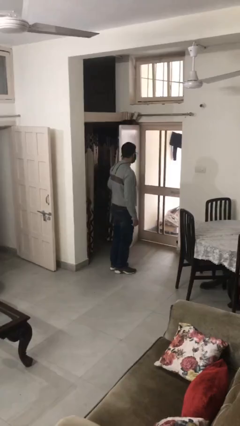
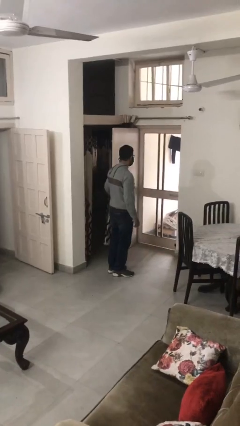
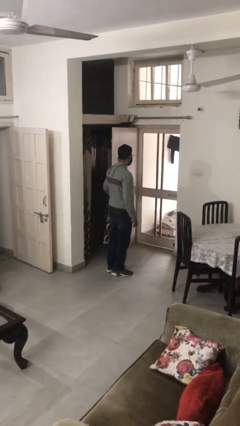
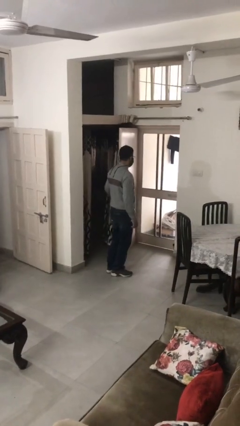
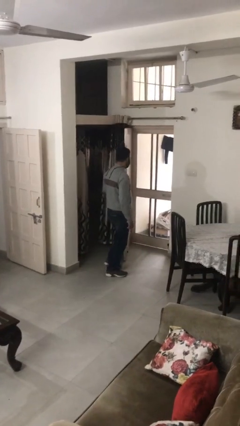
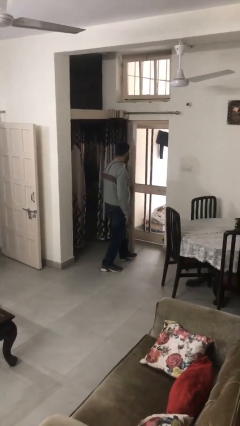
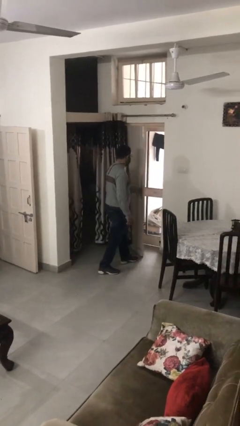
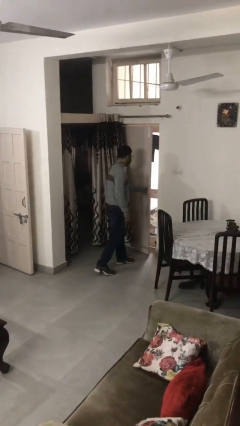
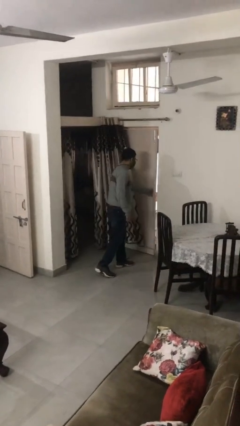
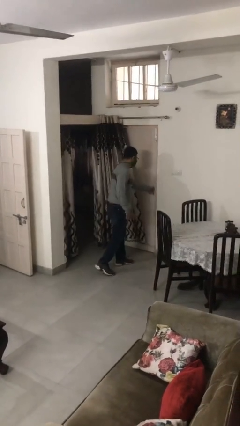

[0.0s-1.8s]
person closes facility door

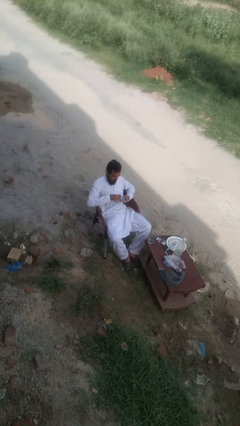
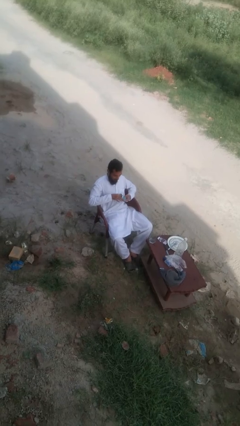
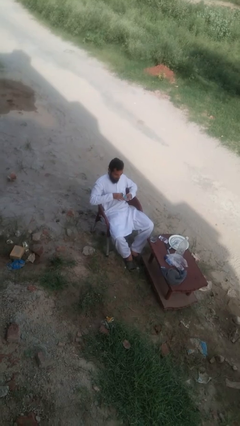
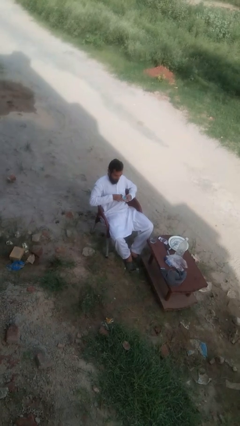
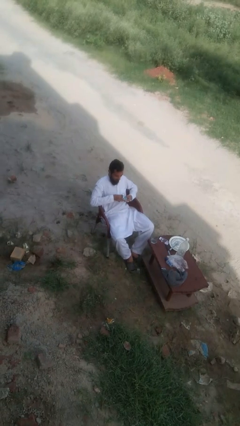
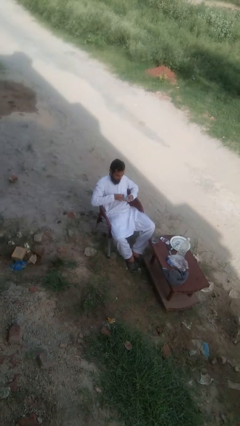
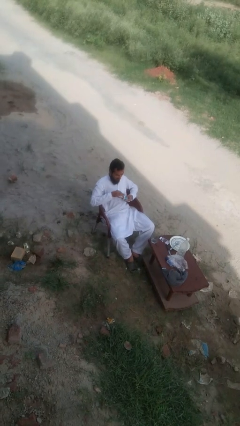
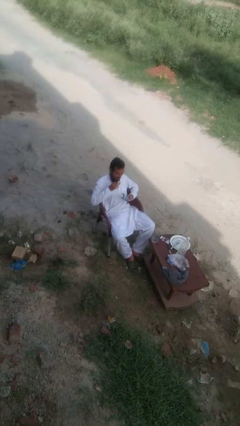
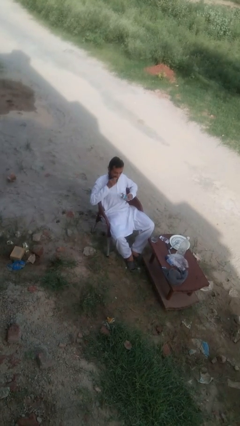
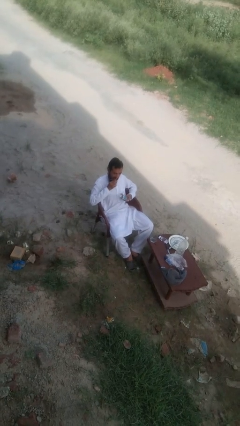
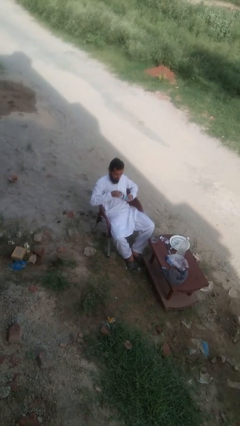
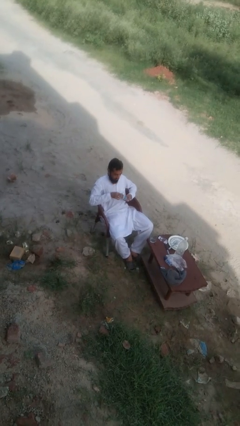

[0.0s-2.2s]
person eats with hands

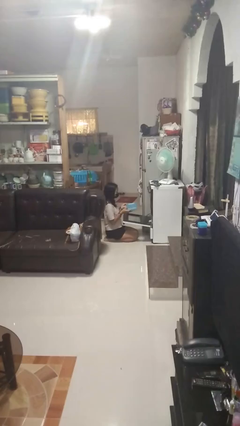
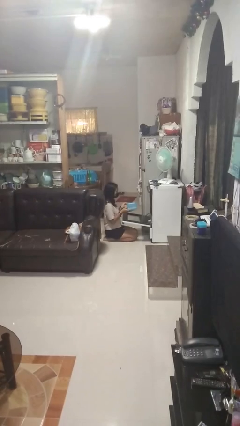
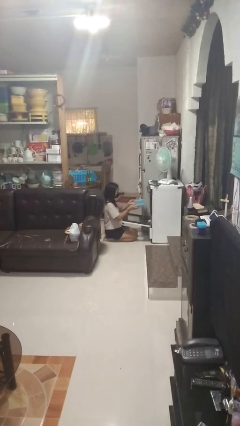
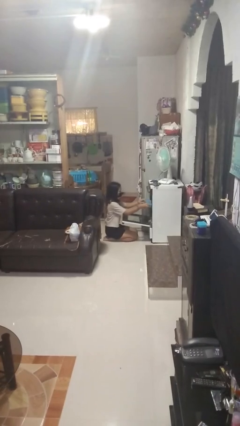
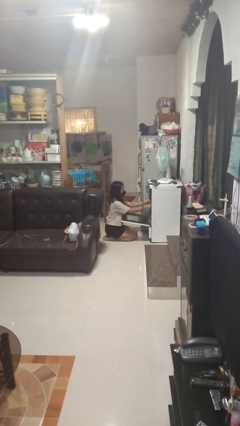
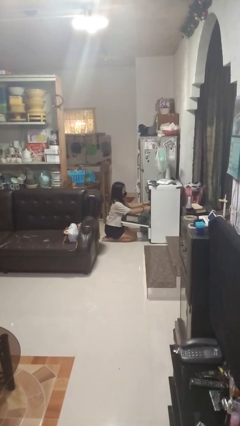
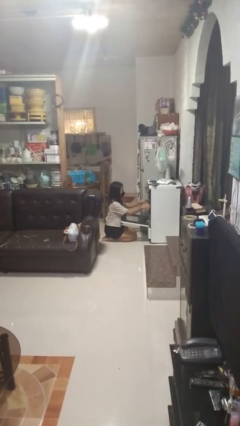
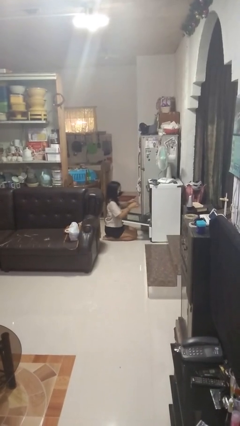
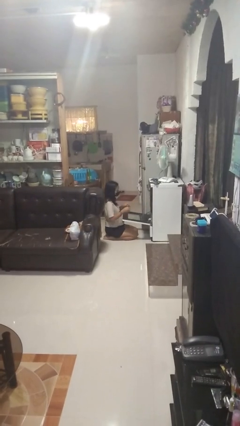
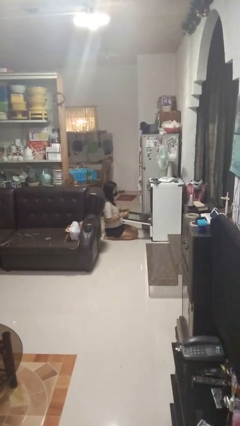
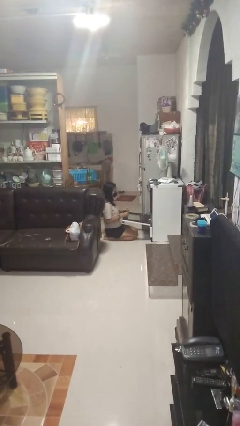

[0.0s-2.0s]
person puts object into oven

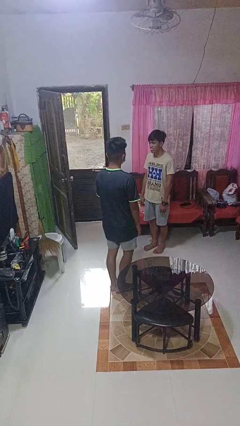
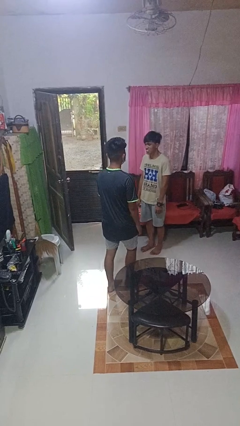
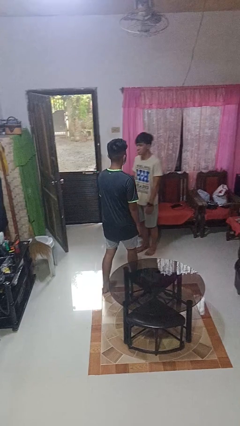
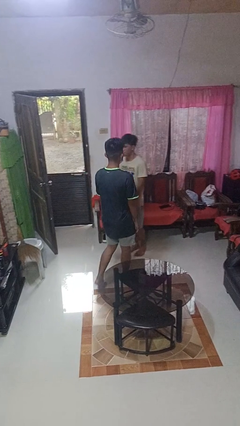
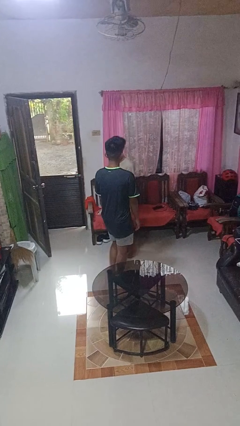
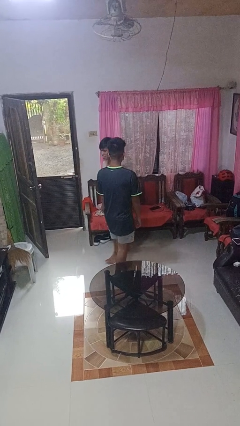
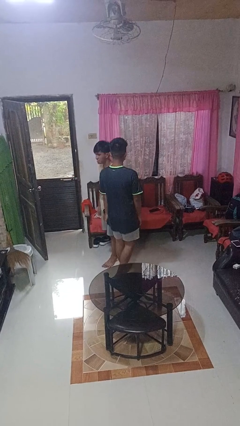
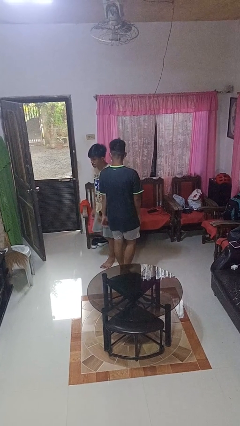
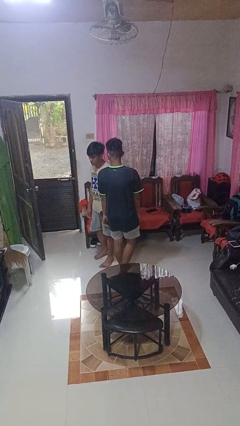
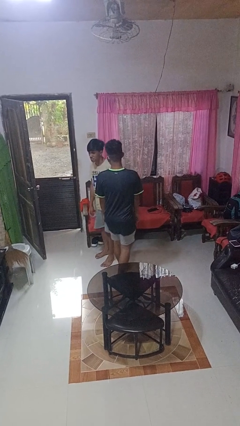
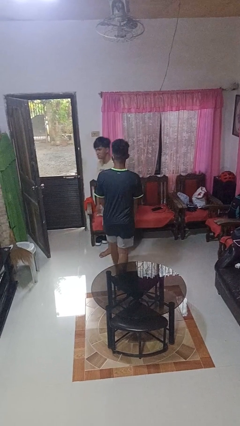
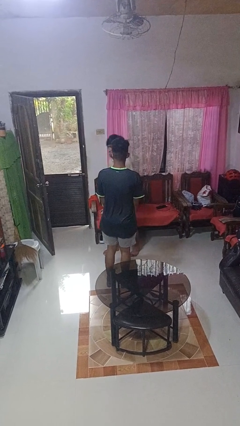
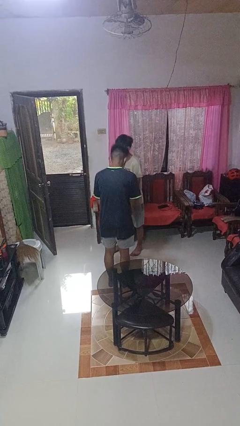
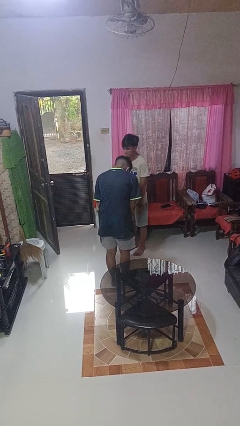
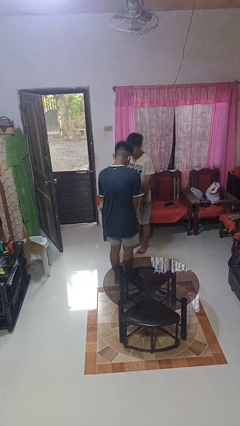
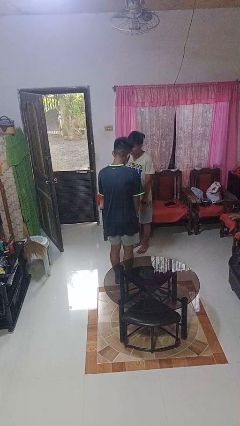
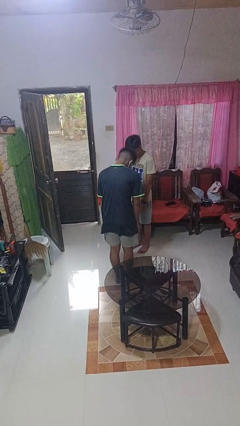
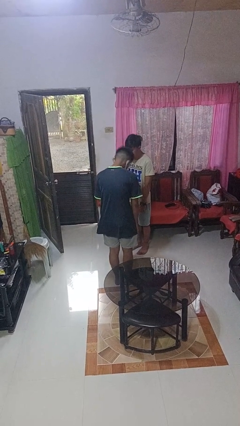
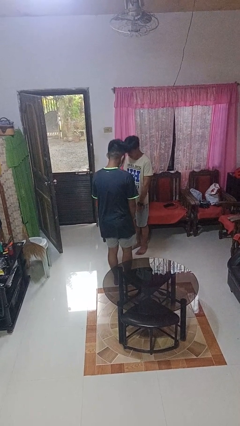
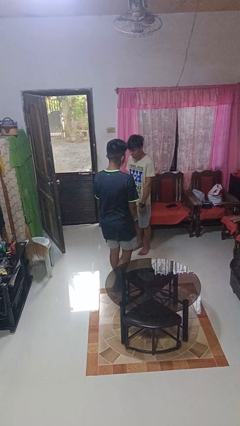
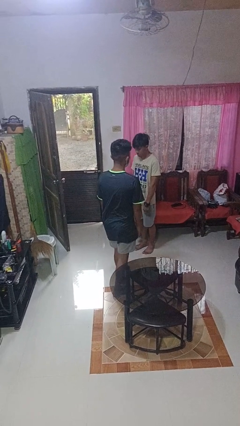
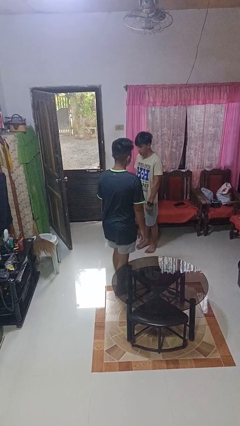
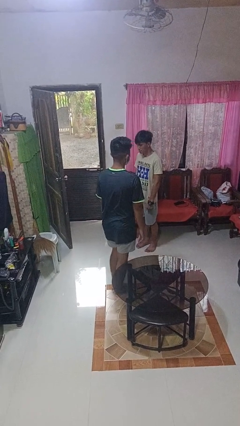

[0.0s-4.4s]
person bumps into person

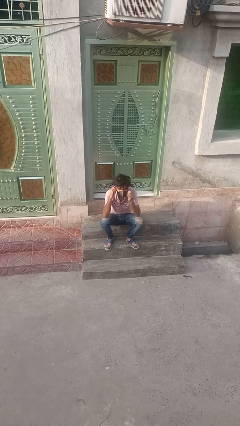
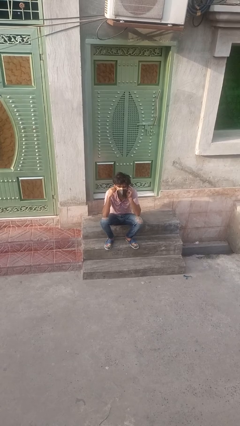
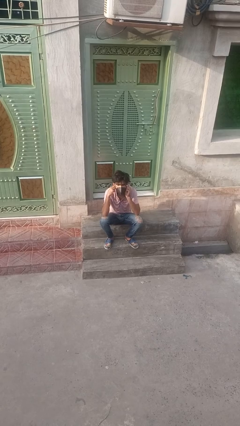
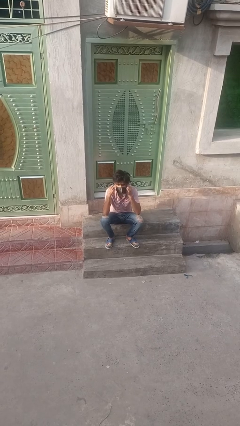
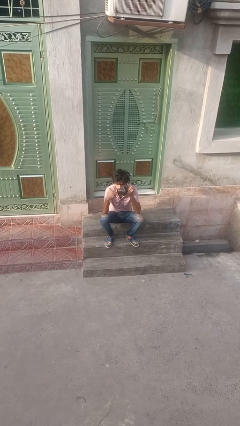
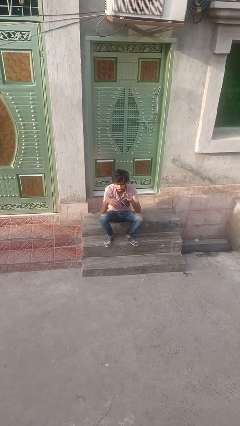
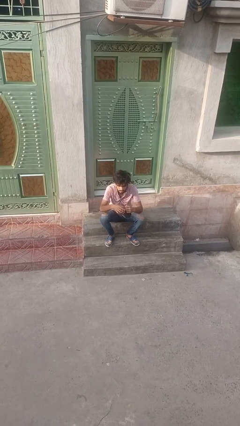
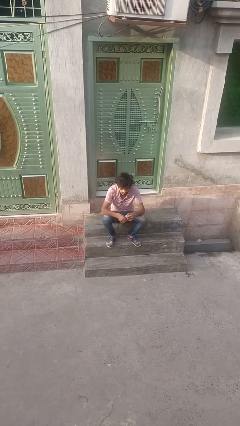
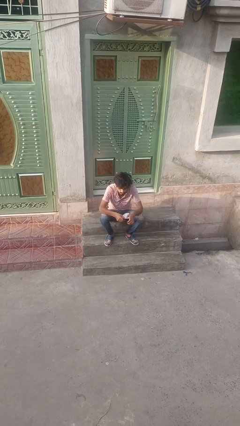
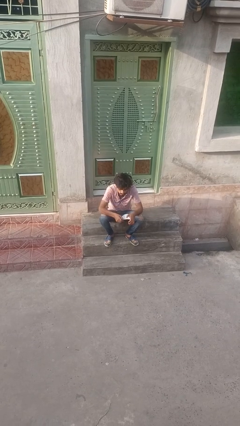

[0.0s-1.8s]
person takes off facemask

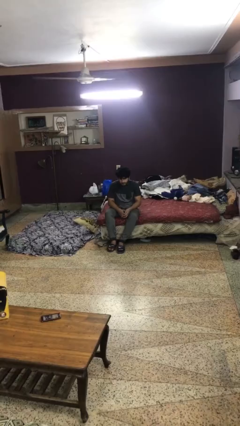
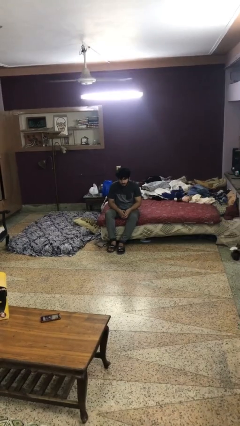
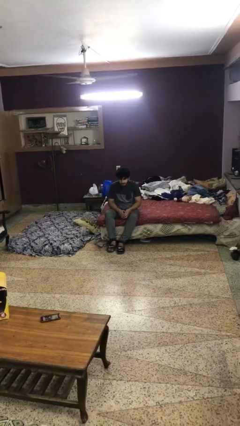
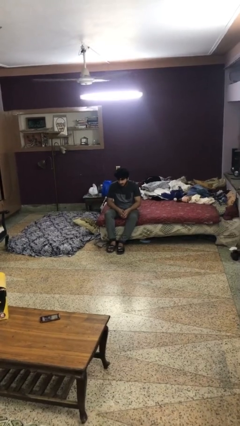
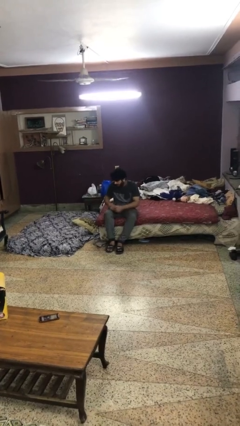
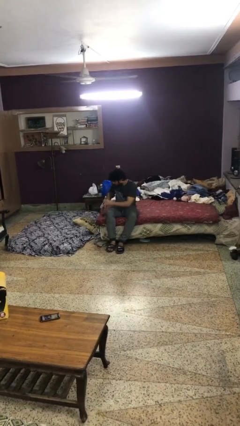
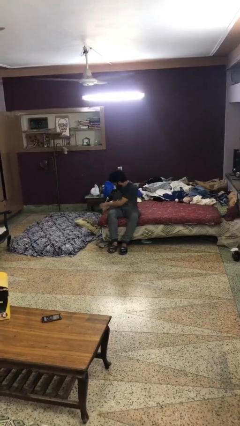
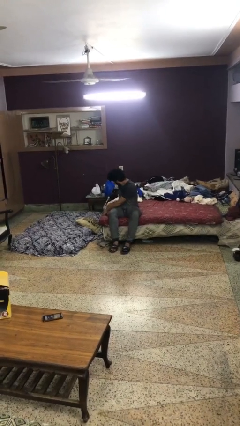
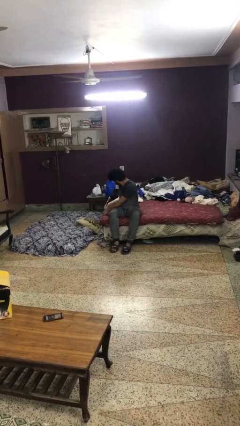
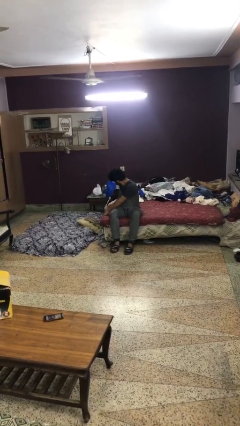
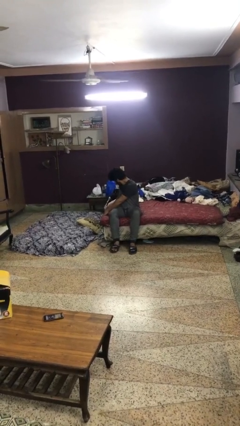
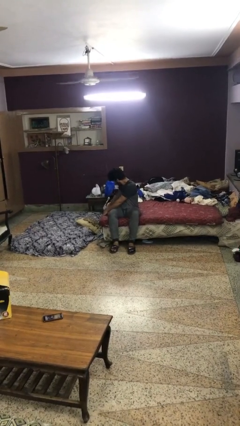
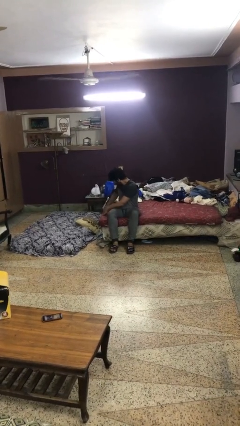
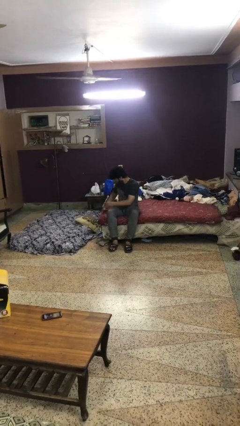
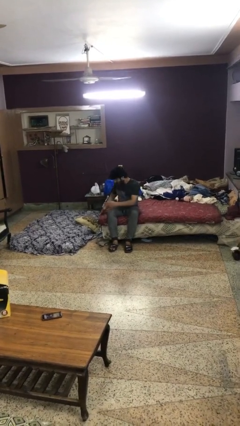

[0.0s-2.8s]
person searches under bed

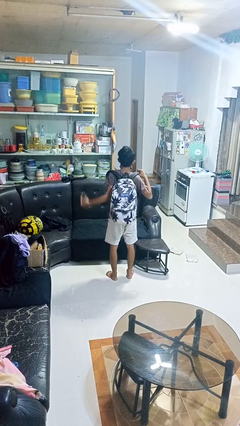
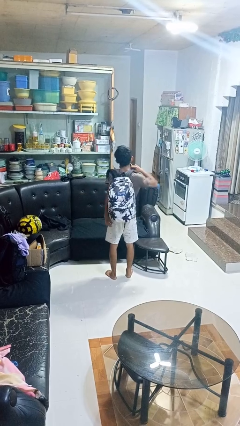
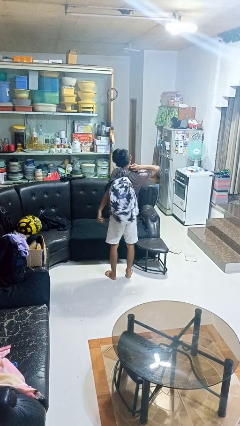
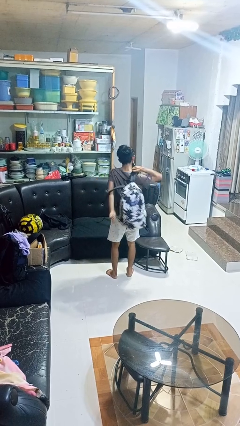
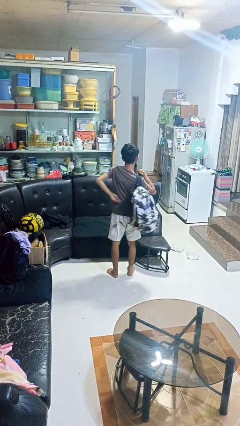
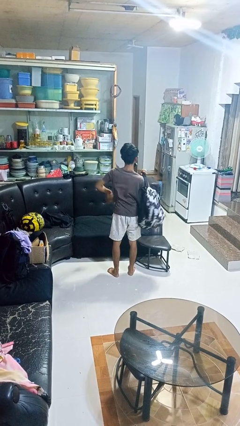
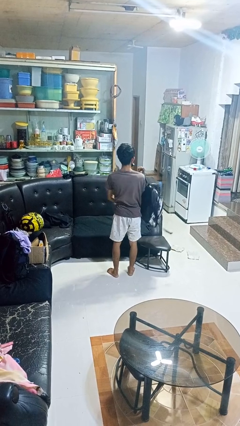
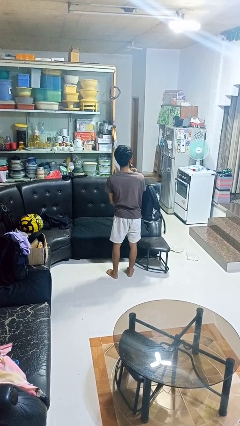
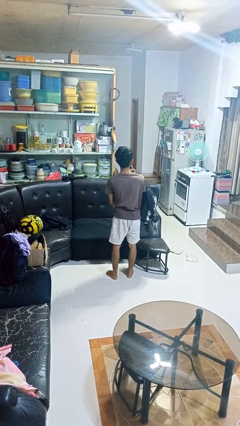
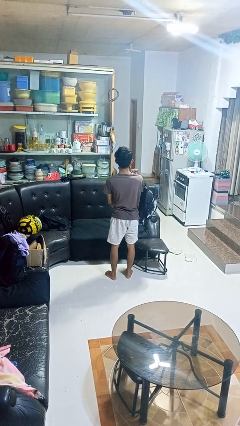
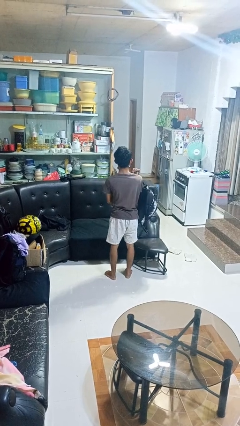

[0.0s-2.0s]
person takes off backpack
